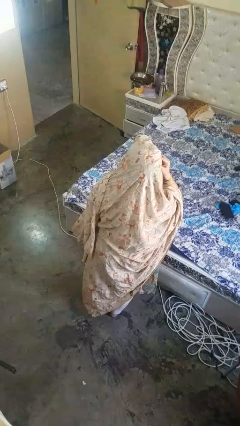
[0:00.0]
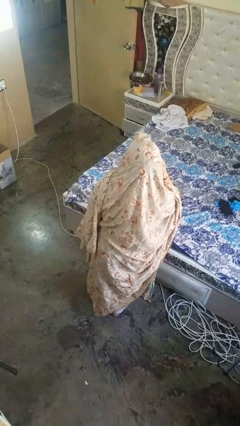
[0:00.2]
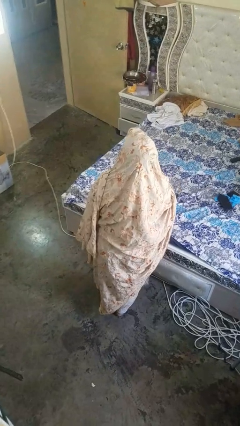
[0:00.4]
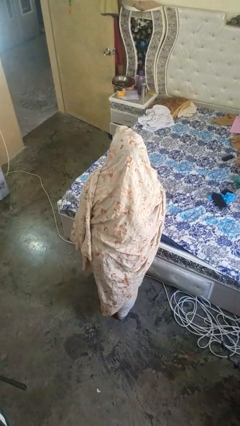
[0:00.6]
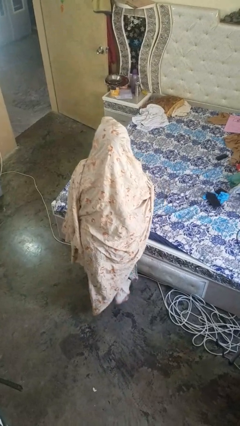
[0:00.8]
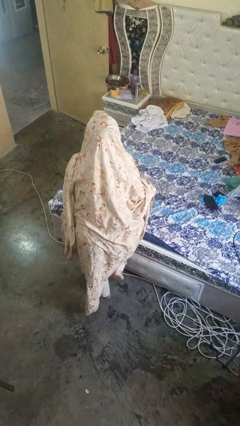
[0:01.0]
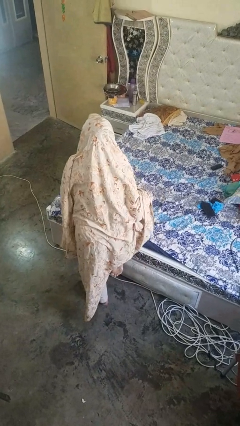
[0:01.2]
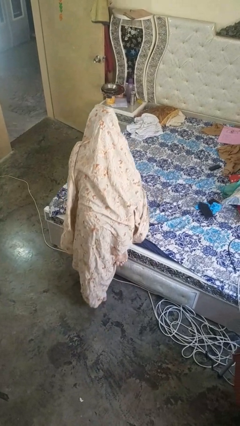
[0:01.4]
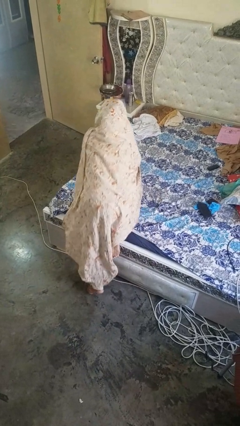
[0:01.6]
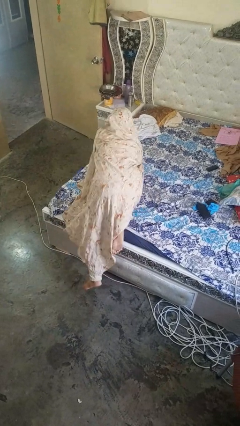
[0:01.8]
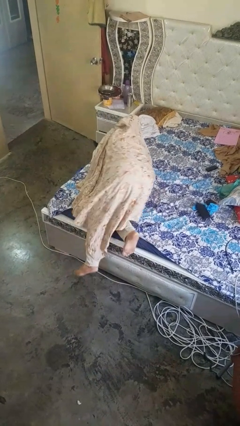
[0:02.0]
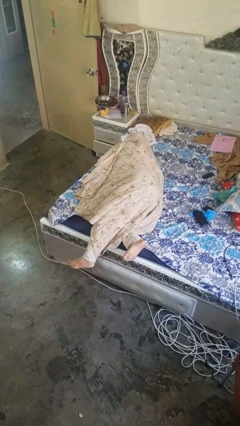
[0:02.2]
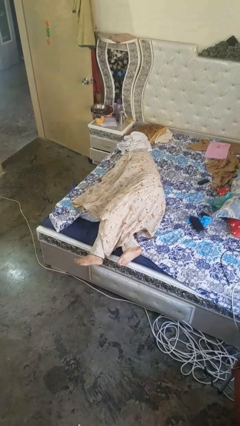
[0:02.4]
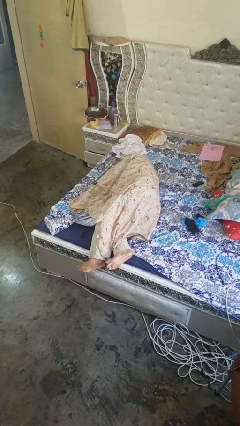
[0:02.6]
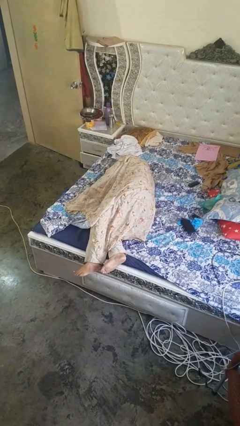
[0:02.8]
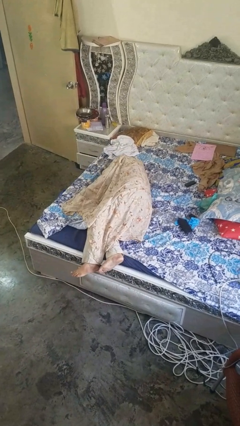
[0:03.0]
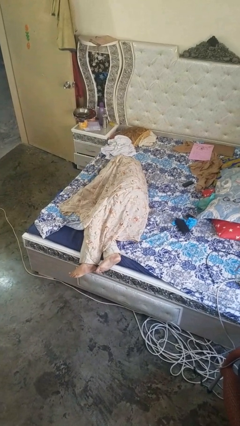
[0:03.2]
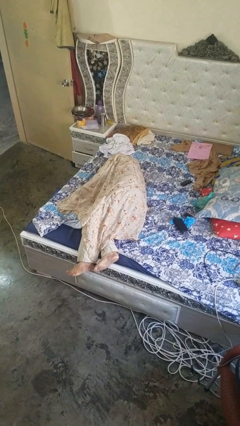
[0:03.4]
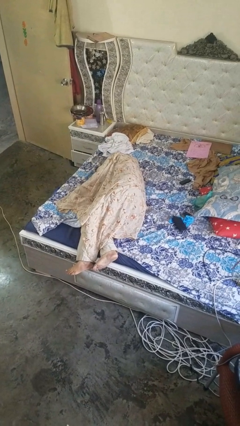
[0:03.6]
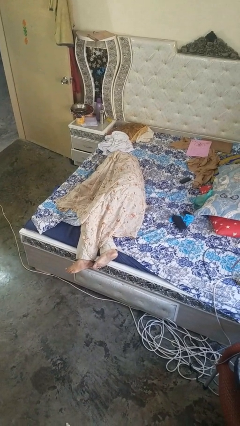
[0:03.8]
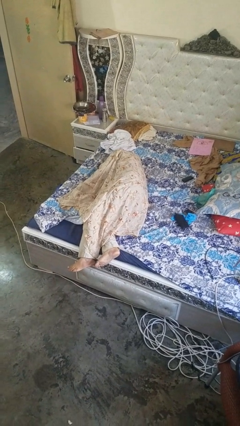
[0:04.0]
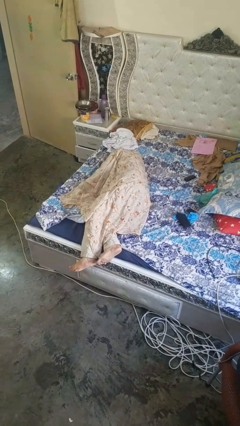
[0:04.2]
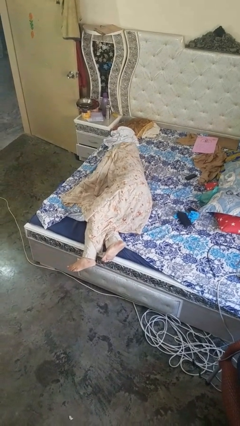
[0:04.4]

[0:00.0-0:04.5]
person lies down on bed

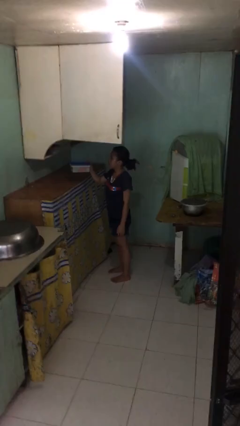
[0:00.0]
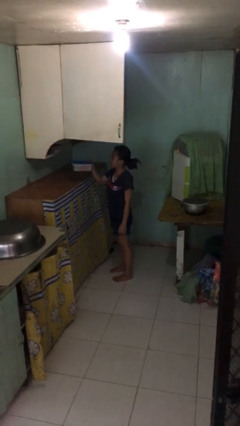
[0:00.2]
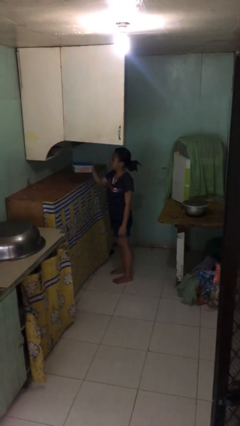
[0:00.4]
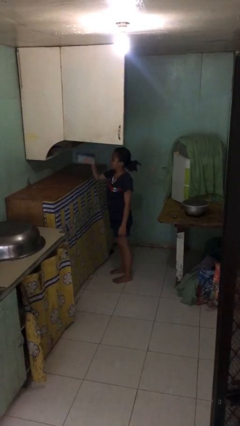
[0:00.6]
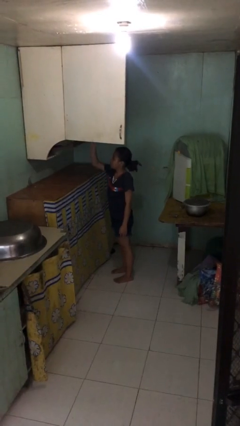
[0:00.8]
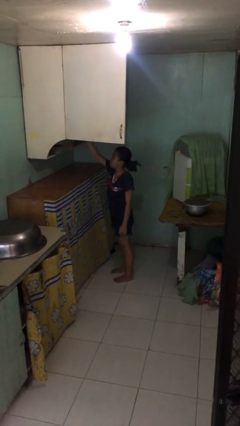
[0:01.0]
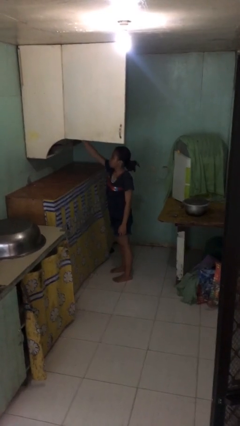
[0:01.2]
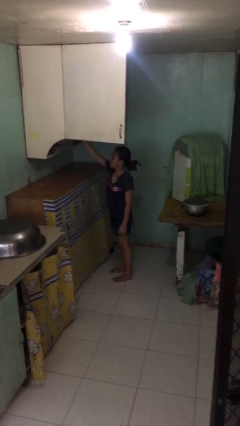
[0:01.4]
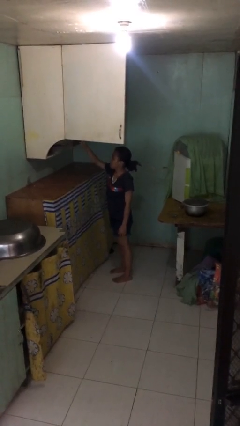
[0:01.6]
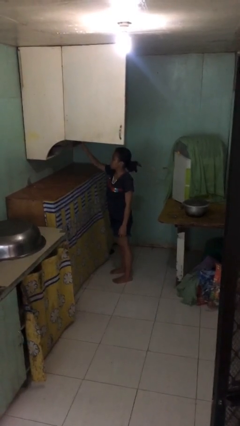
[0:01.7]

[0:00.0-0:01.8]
person puts down object on shelf

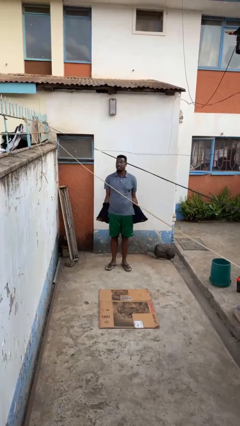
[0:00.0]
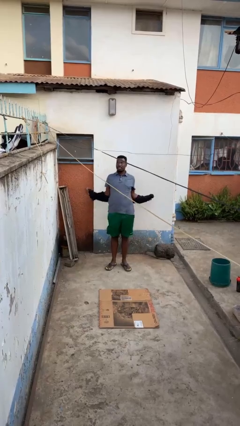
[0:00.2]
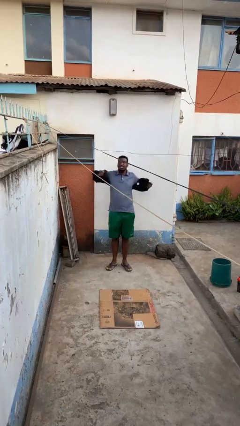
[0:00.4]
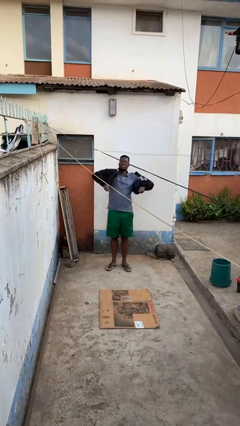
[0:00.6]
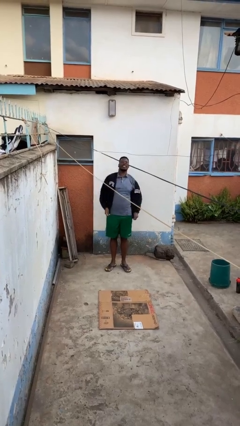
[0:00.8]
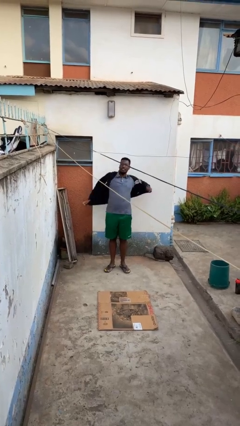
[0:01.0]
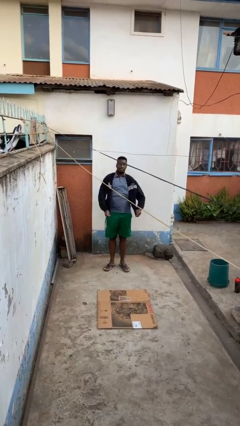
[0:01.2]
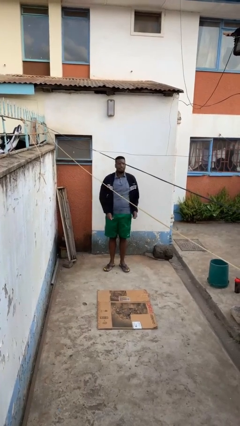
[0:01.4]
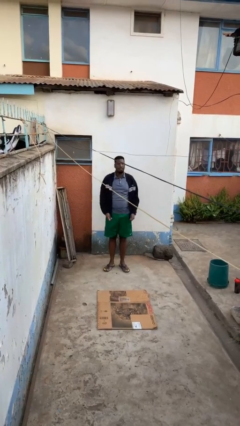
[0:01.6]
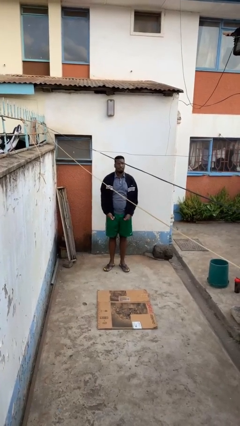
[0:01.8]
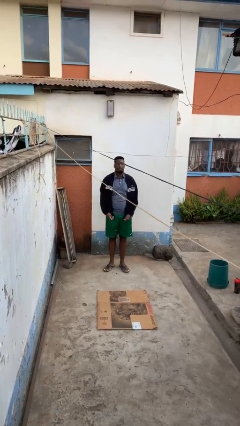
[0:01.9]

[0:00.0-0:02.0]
person puts on jacket

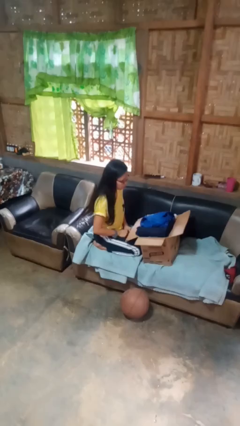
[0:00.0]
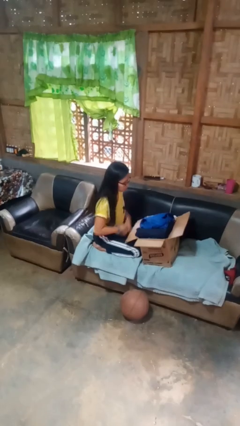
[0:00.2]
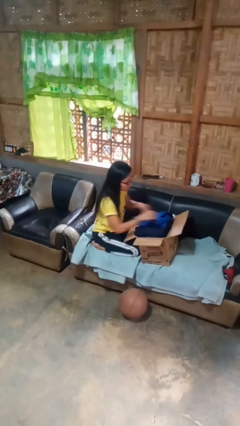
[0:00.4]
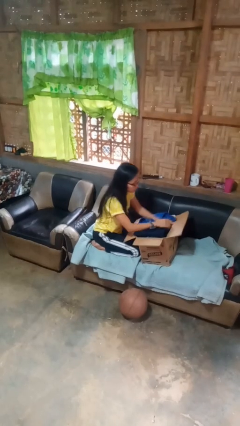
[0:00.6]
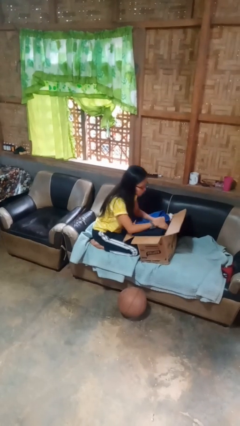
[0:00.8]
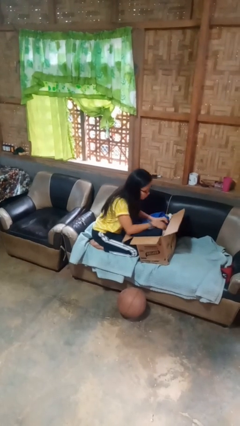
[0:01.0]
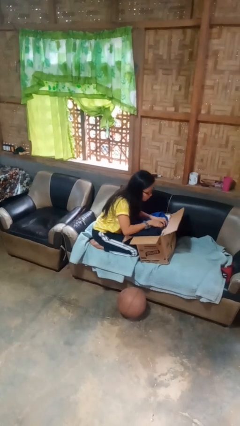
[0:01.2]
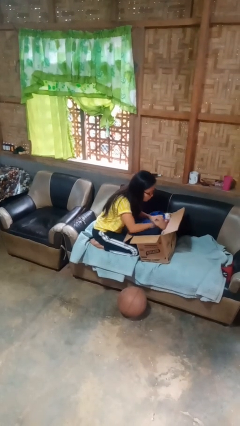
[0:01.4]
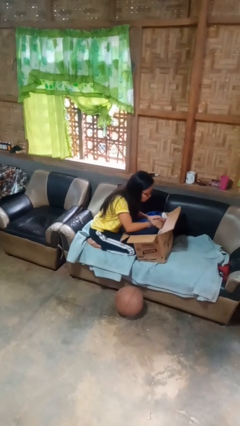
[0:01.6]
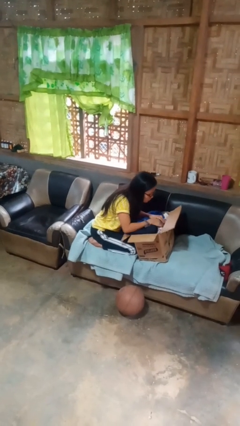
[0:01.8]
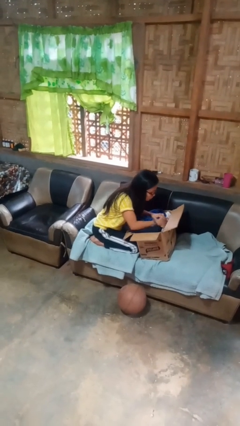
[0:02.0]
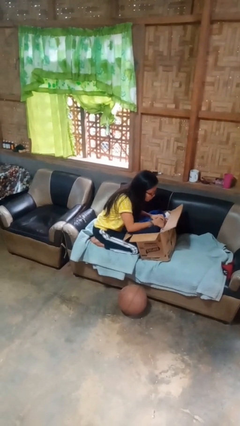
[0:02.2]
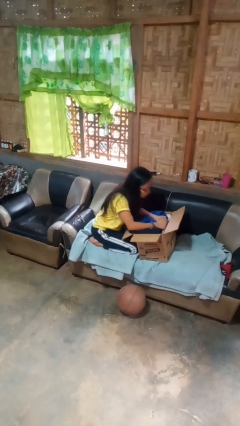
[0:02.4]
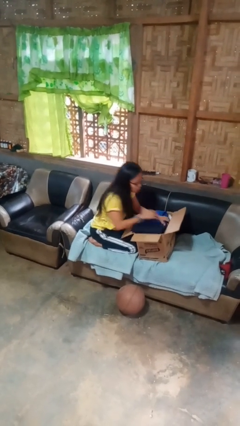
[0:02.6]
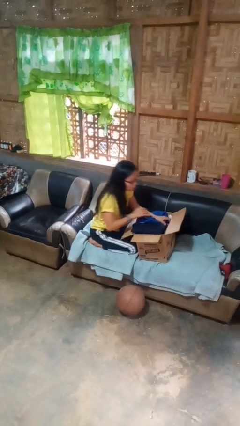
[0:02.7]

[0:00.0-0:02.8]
person searches in box

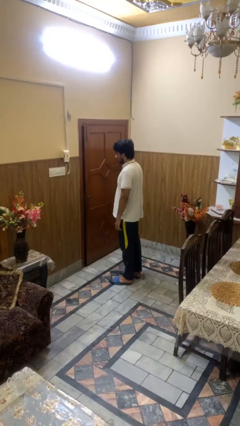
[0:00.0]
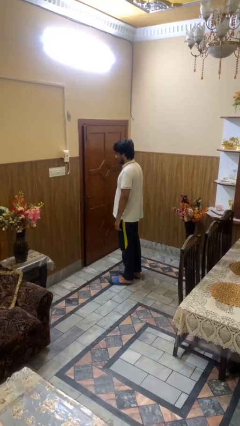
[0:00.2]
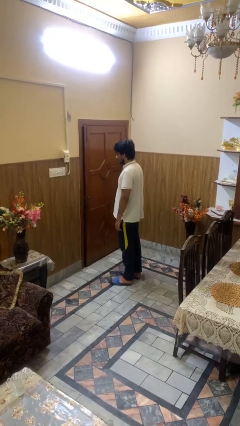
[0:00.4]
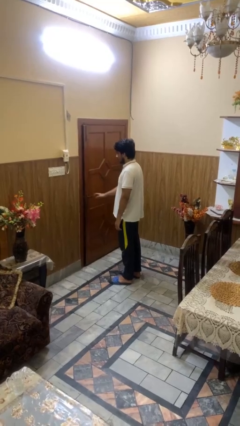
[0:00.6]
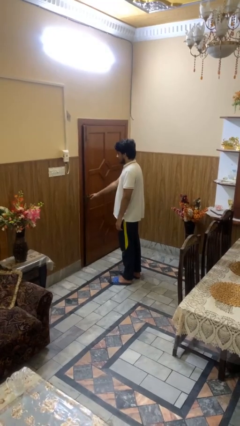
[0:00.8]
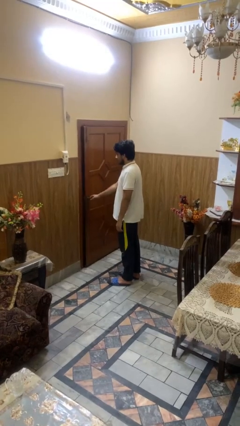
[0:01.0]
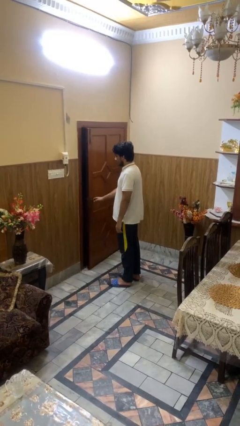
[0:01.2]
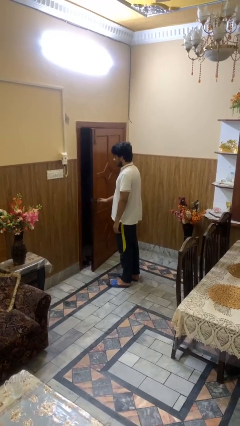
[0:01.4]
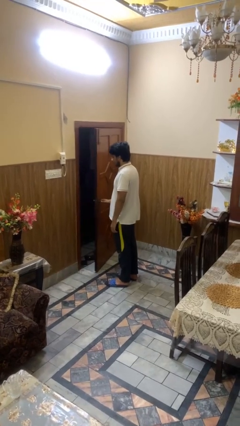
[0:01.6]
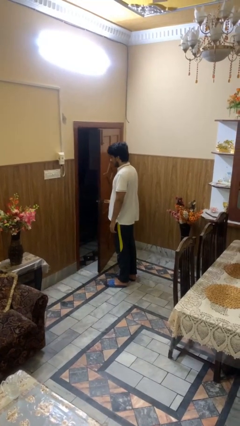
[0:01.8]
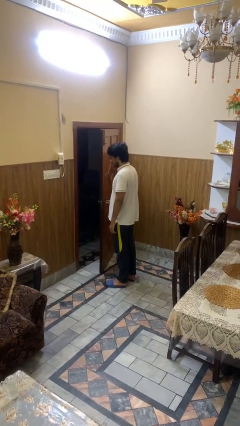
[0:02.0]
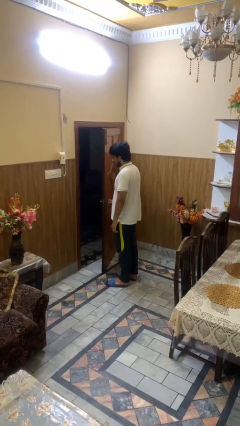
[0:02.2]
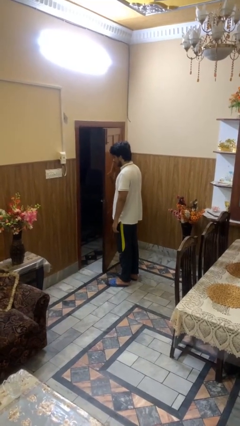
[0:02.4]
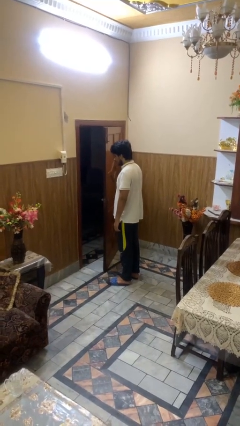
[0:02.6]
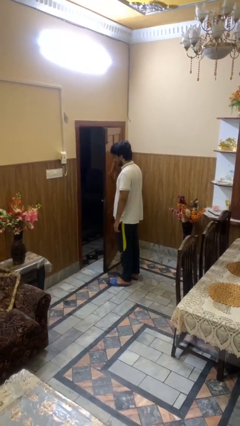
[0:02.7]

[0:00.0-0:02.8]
person opens facility door

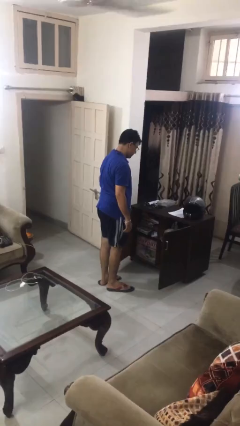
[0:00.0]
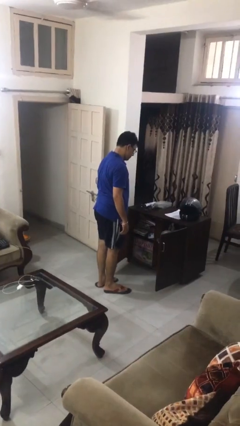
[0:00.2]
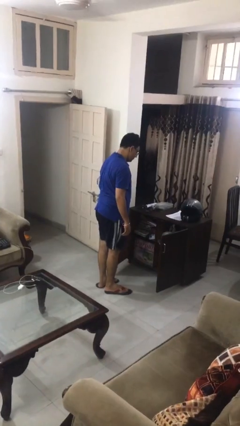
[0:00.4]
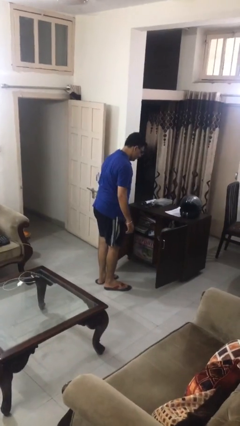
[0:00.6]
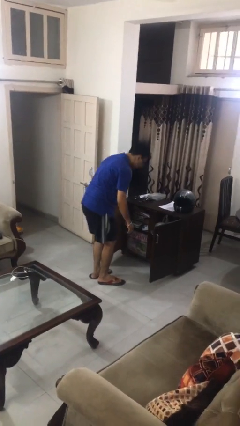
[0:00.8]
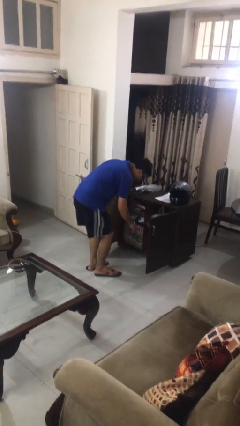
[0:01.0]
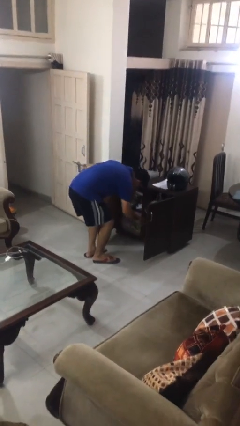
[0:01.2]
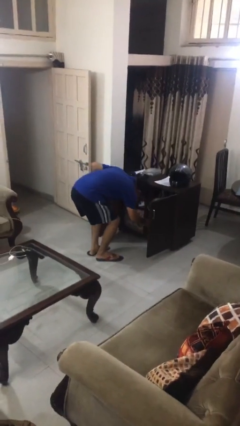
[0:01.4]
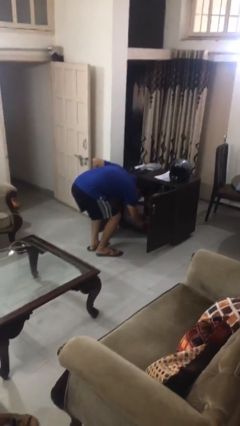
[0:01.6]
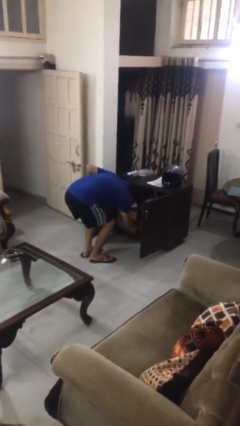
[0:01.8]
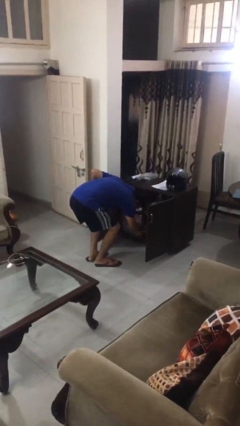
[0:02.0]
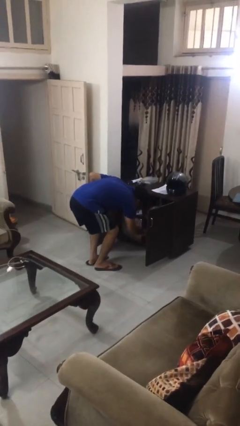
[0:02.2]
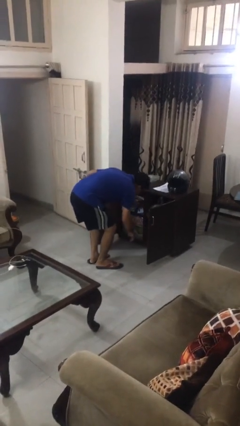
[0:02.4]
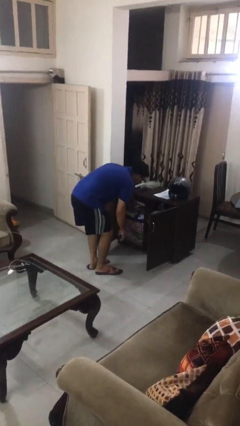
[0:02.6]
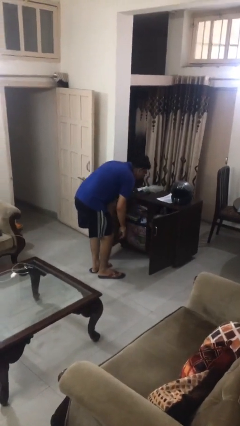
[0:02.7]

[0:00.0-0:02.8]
person searches in cabinet

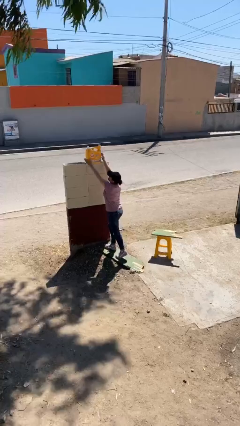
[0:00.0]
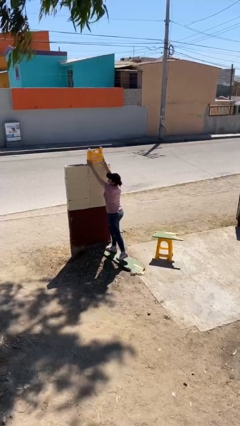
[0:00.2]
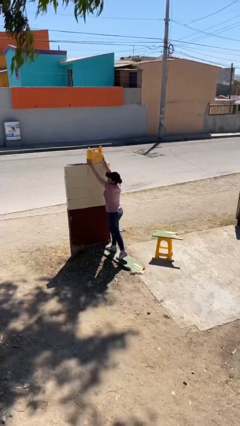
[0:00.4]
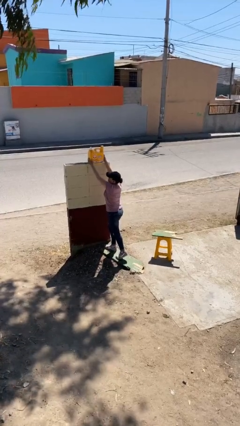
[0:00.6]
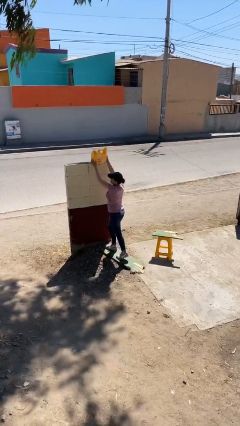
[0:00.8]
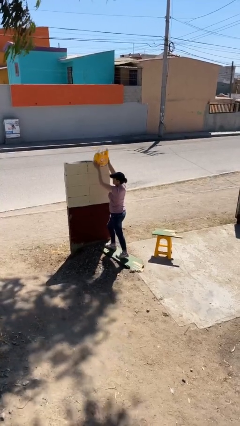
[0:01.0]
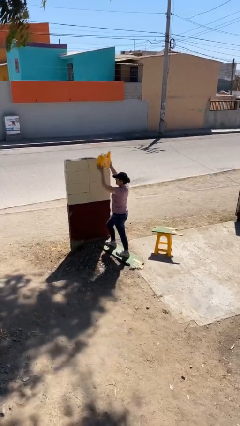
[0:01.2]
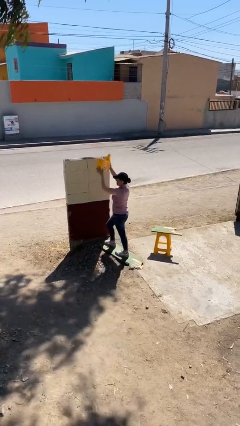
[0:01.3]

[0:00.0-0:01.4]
person picks up object from shelf
